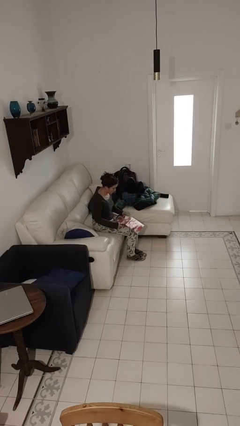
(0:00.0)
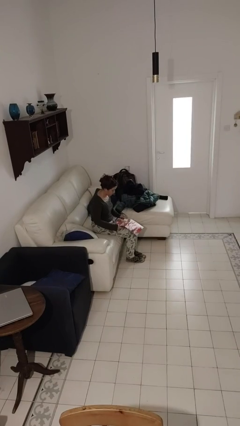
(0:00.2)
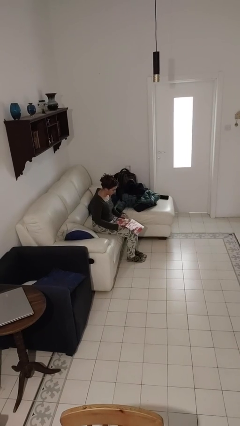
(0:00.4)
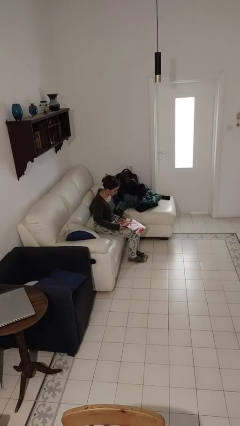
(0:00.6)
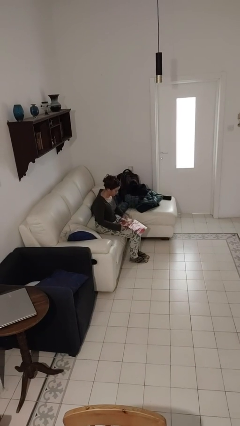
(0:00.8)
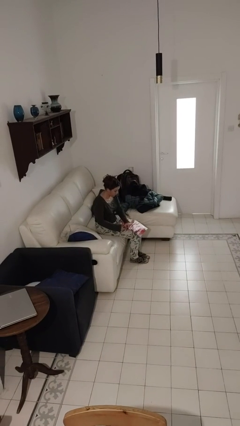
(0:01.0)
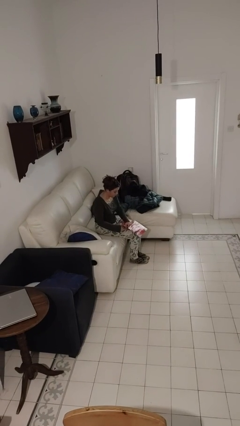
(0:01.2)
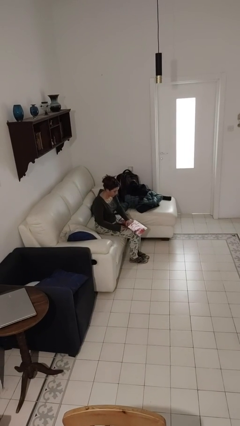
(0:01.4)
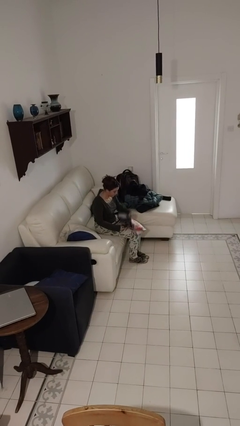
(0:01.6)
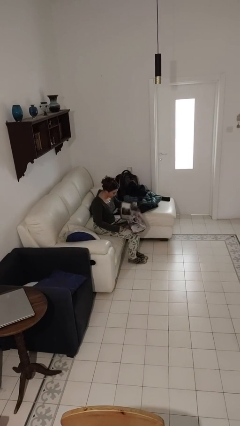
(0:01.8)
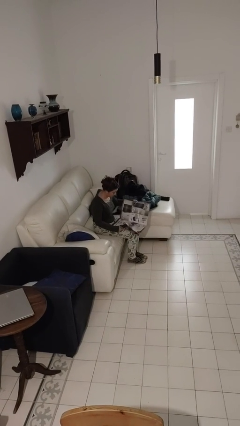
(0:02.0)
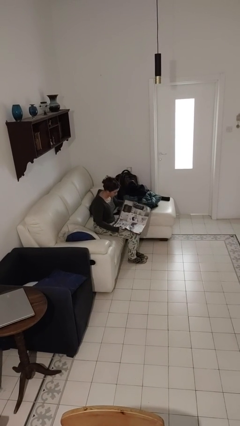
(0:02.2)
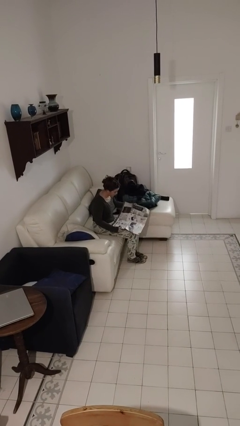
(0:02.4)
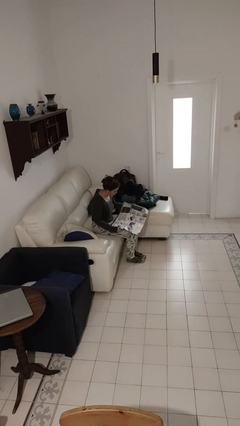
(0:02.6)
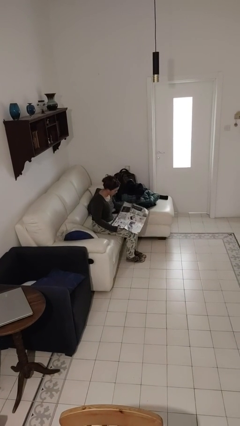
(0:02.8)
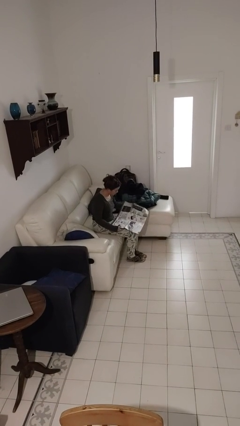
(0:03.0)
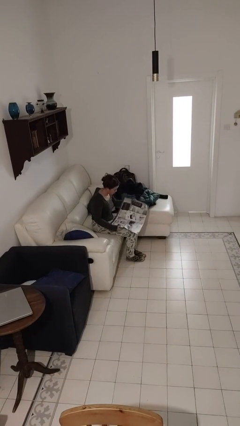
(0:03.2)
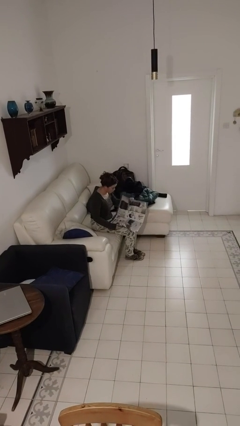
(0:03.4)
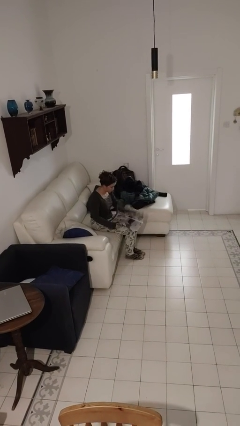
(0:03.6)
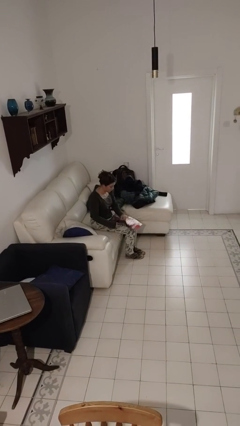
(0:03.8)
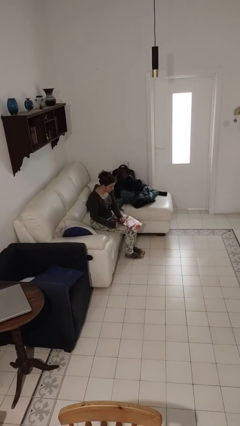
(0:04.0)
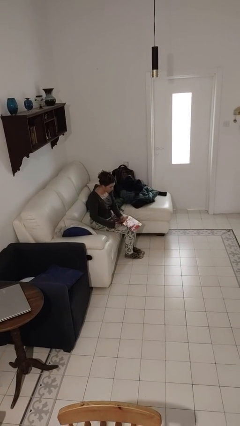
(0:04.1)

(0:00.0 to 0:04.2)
person reads newspaper

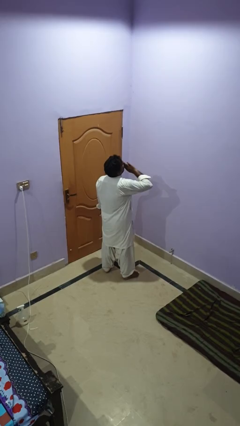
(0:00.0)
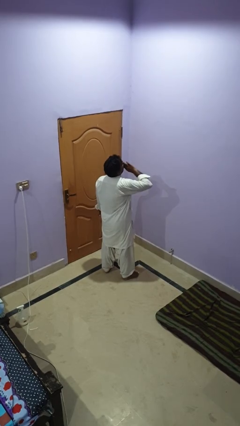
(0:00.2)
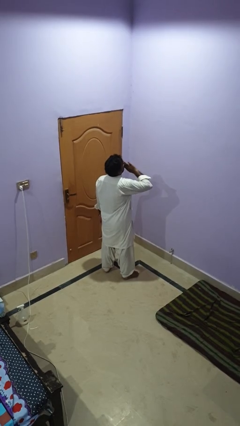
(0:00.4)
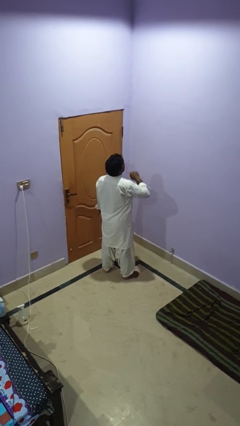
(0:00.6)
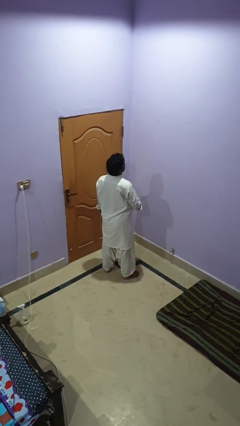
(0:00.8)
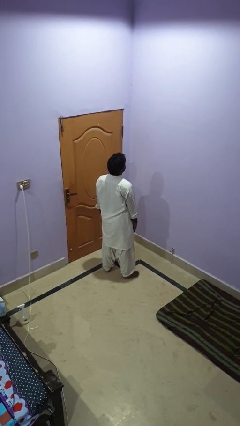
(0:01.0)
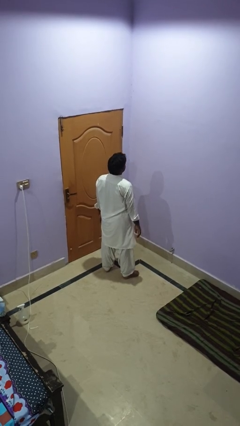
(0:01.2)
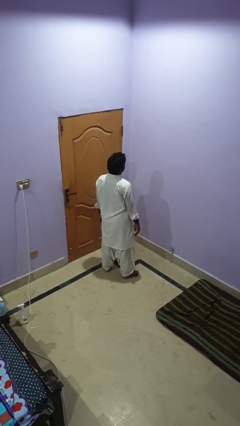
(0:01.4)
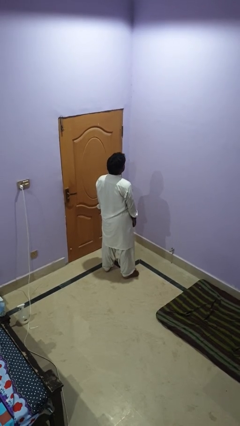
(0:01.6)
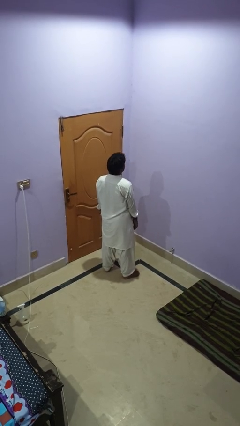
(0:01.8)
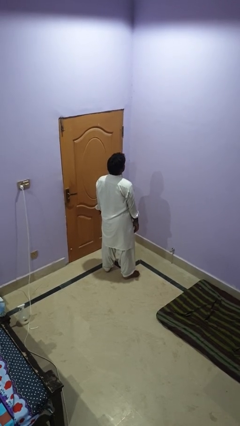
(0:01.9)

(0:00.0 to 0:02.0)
person yawns

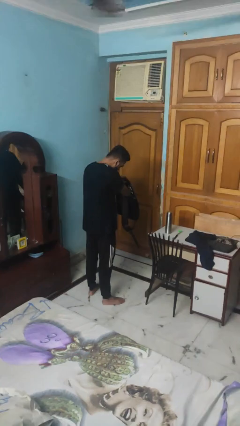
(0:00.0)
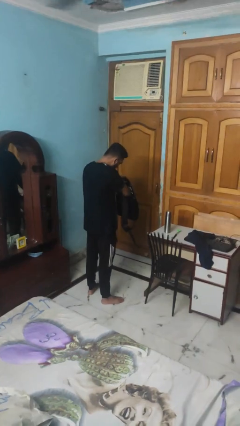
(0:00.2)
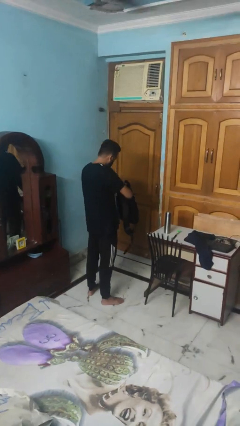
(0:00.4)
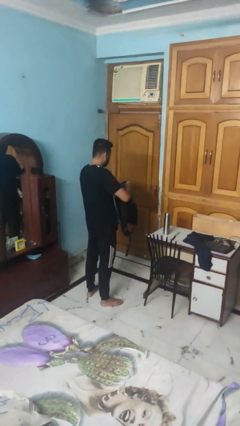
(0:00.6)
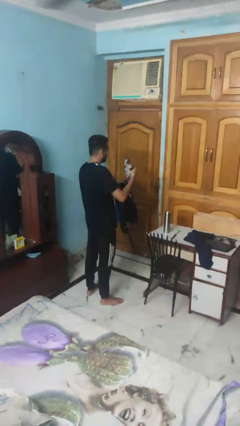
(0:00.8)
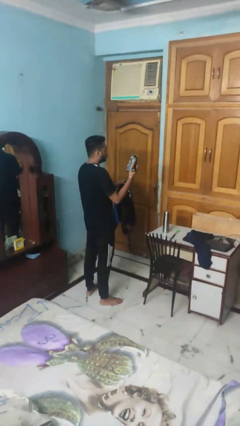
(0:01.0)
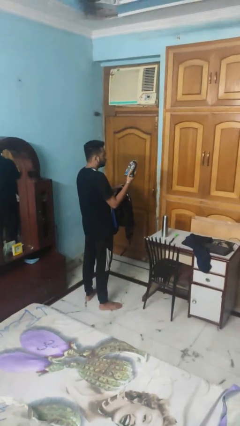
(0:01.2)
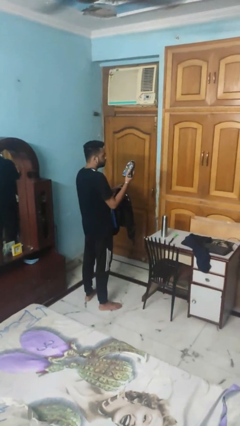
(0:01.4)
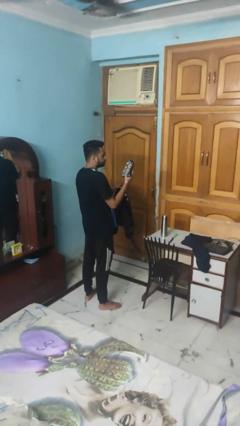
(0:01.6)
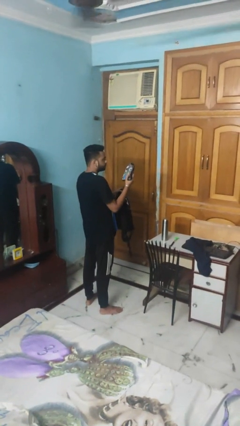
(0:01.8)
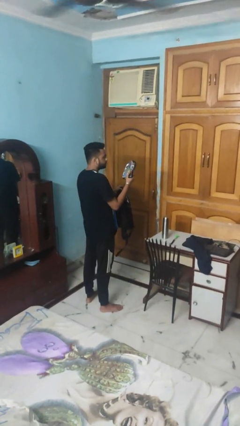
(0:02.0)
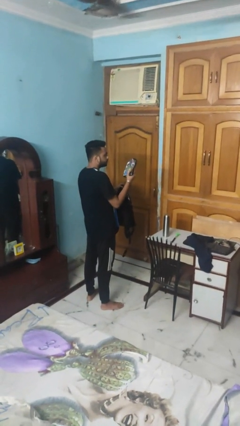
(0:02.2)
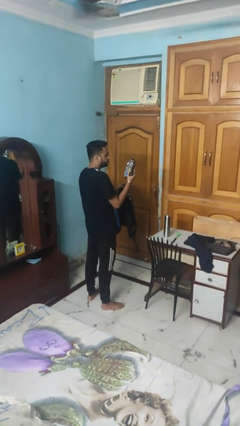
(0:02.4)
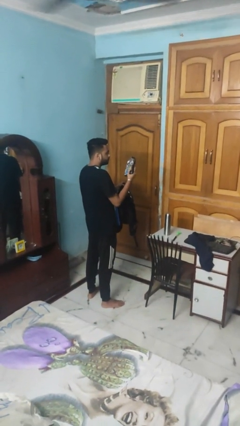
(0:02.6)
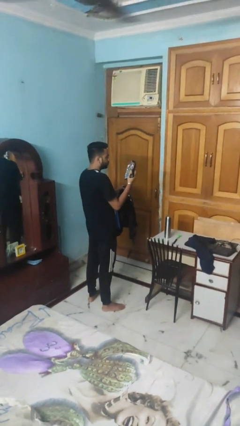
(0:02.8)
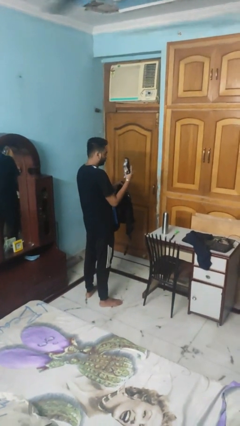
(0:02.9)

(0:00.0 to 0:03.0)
person takes object from backpack

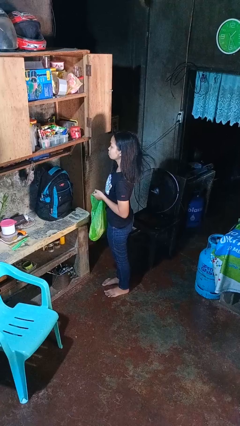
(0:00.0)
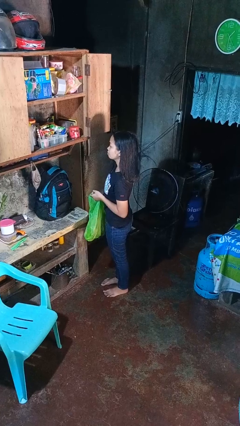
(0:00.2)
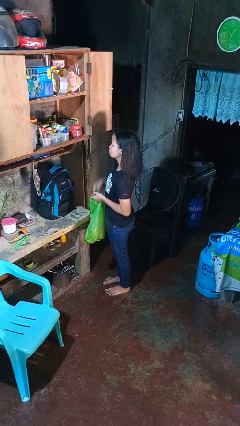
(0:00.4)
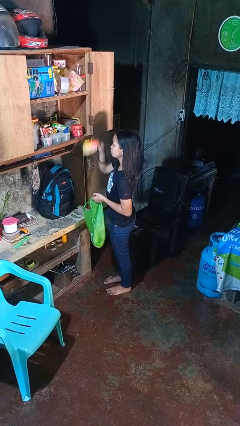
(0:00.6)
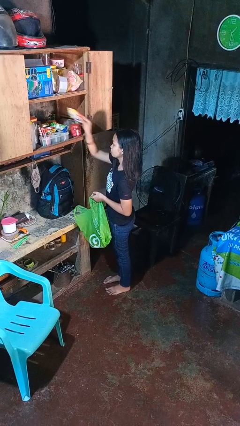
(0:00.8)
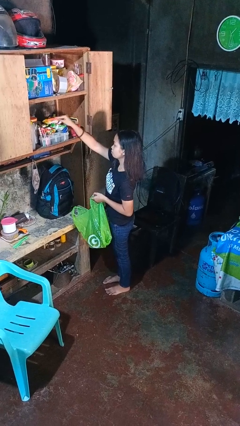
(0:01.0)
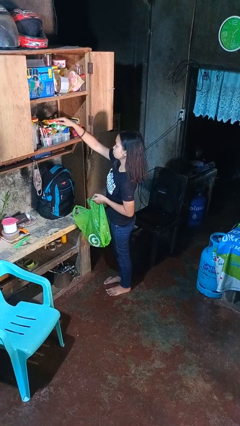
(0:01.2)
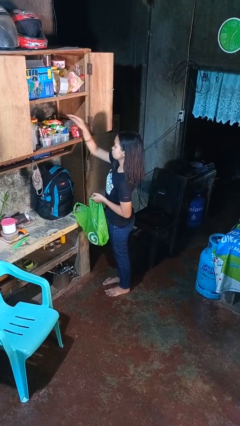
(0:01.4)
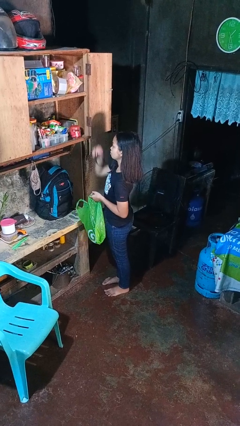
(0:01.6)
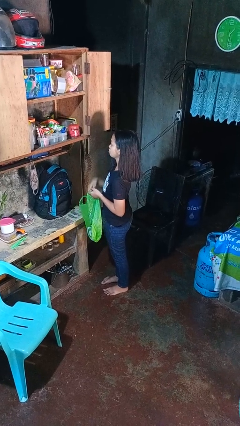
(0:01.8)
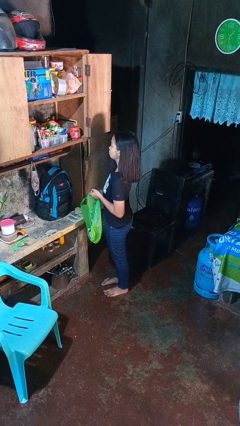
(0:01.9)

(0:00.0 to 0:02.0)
person loads groceries into cabinet

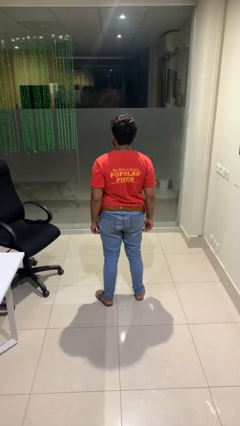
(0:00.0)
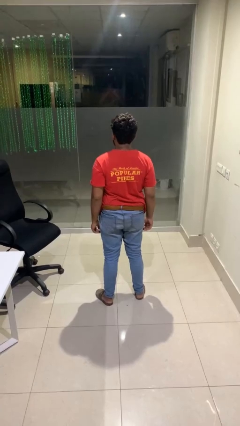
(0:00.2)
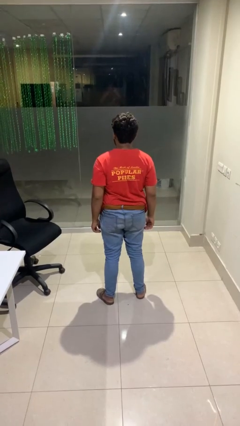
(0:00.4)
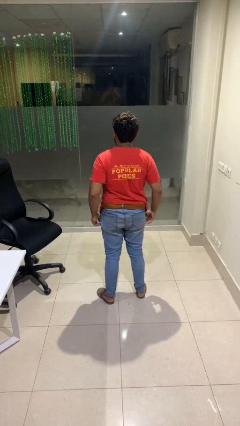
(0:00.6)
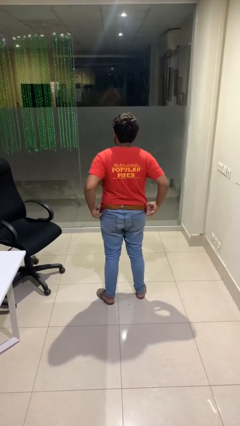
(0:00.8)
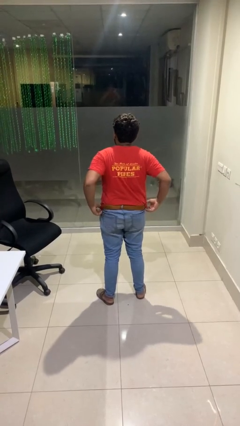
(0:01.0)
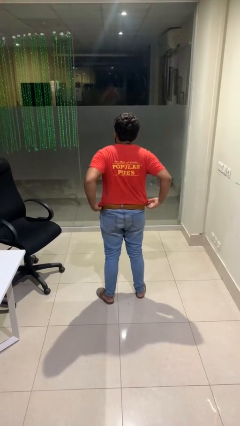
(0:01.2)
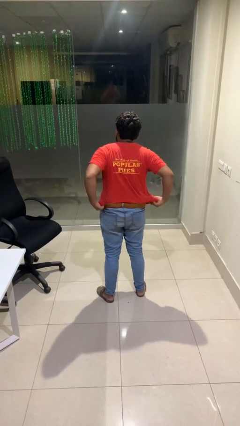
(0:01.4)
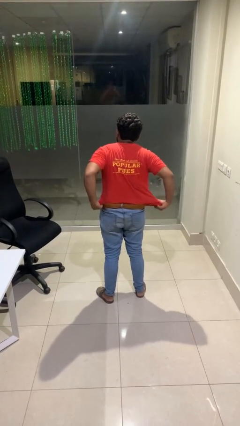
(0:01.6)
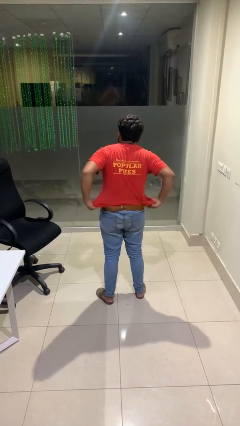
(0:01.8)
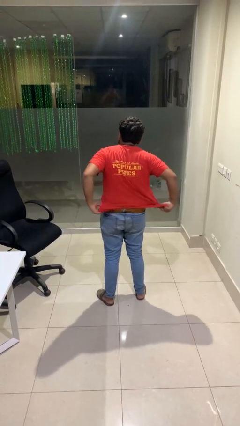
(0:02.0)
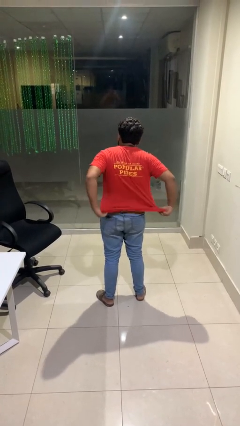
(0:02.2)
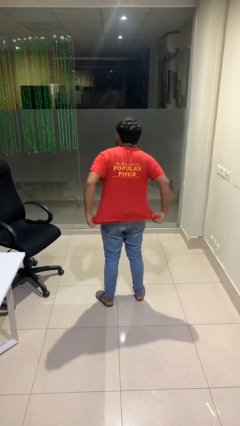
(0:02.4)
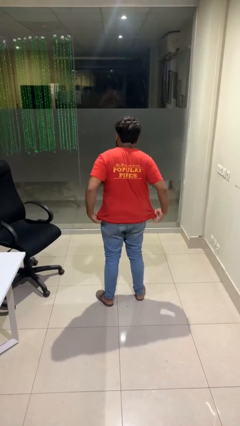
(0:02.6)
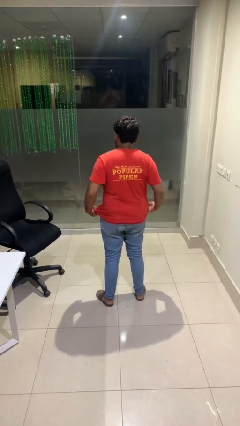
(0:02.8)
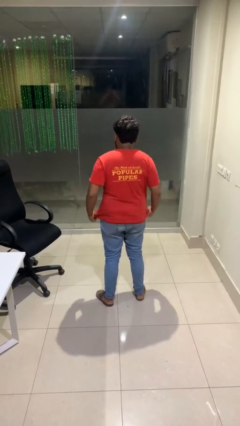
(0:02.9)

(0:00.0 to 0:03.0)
person untucks shirt

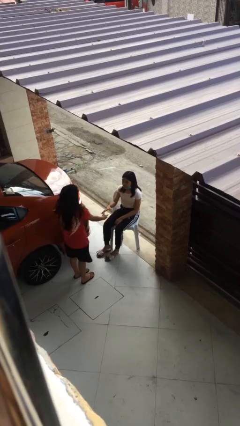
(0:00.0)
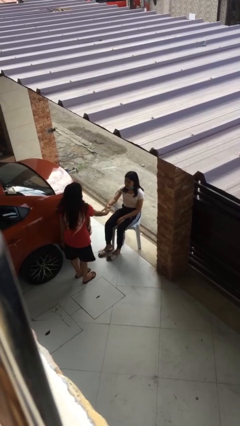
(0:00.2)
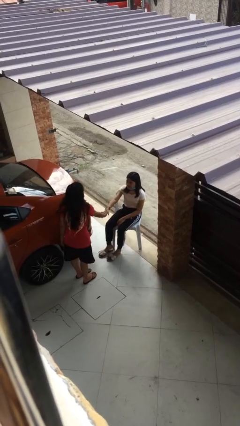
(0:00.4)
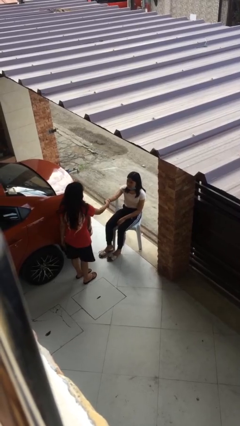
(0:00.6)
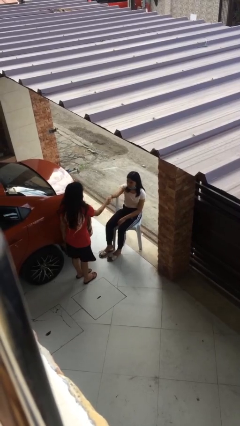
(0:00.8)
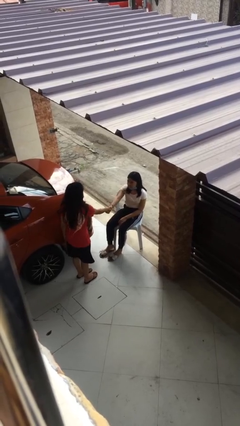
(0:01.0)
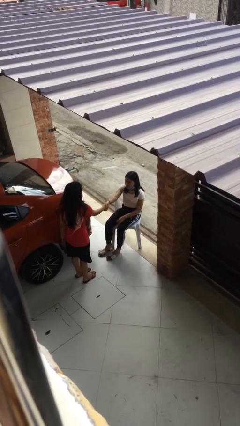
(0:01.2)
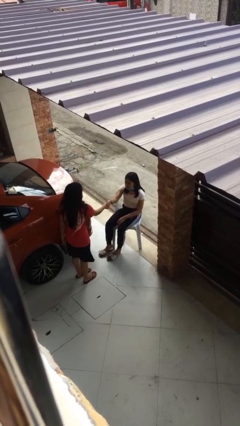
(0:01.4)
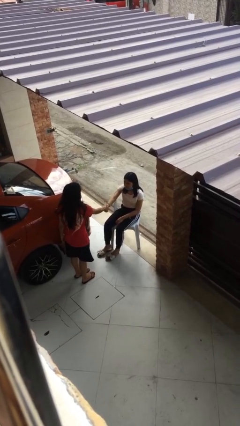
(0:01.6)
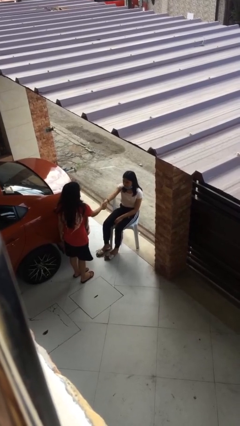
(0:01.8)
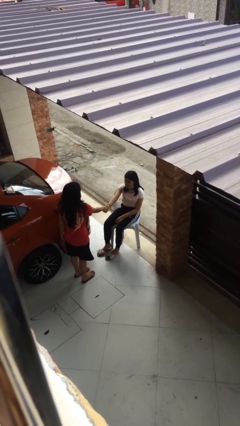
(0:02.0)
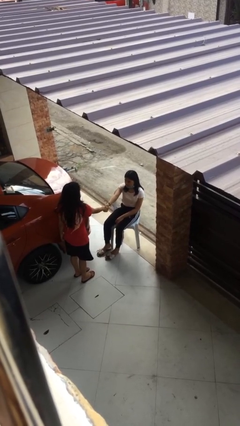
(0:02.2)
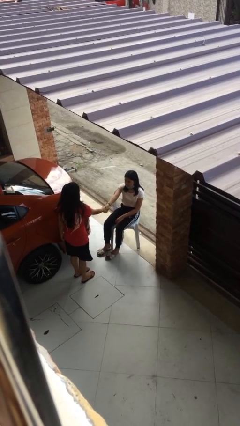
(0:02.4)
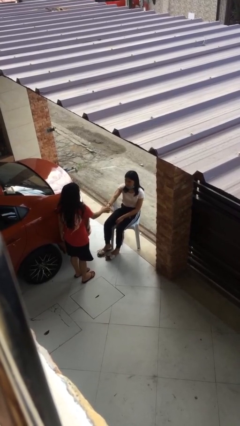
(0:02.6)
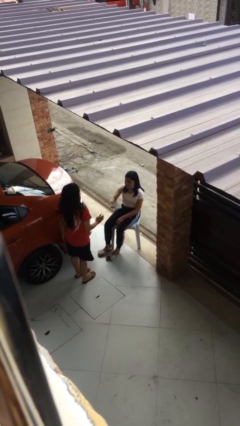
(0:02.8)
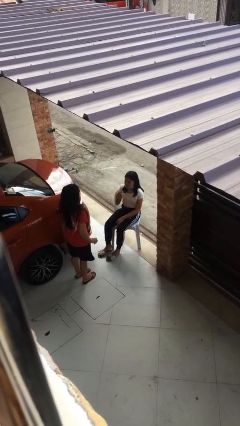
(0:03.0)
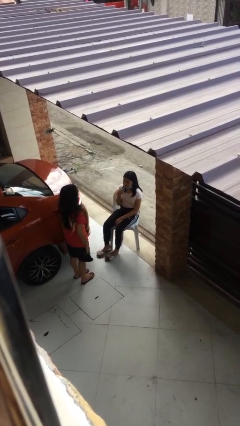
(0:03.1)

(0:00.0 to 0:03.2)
person shakes hand
